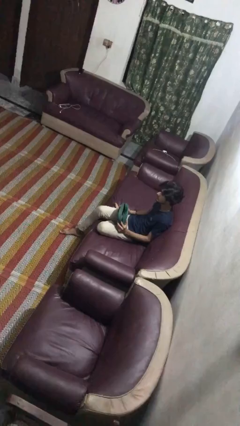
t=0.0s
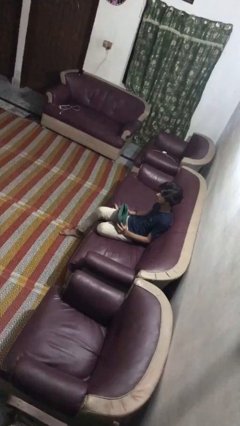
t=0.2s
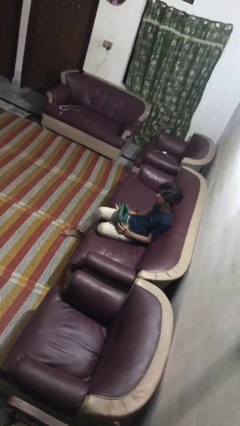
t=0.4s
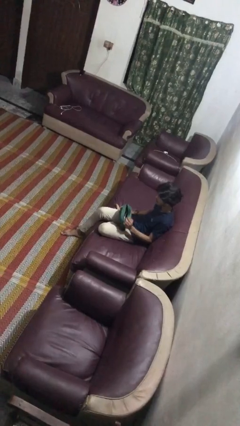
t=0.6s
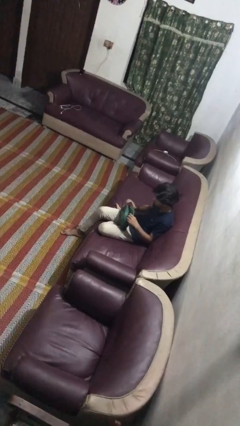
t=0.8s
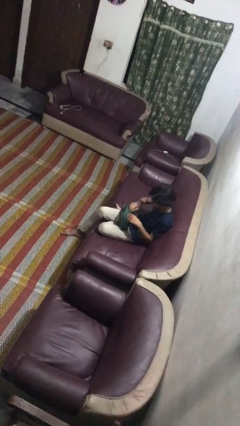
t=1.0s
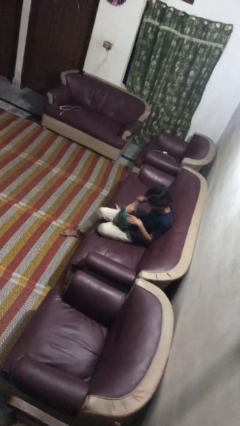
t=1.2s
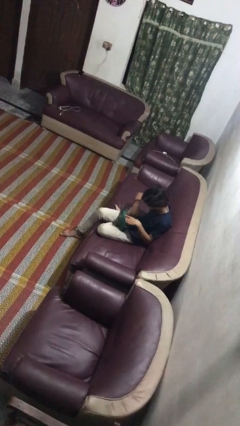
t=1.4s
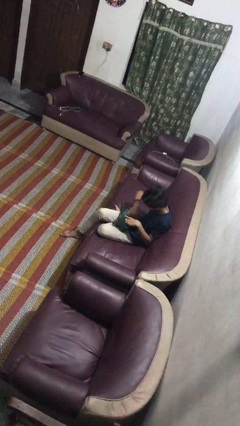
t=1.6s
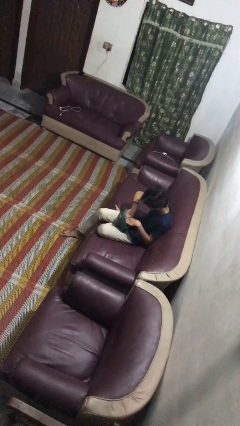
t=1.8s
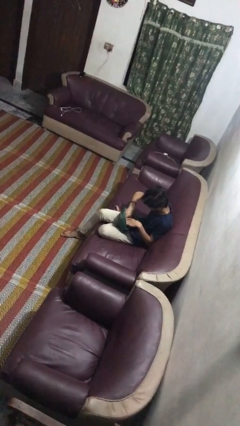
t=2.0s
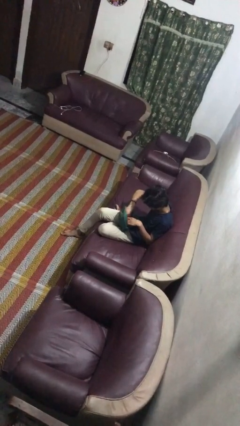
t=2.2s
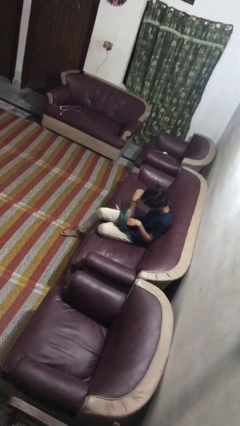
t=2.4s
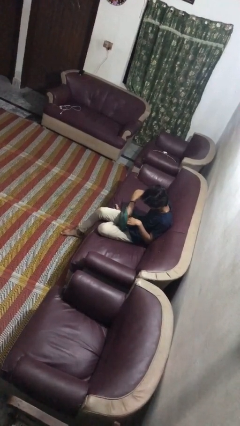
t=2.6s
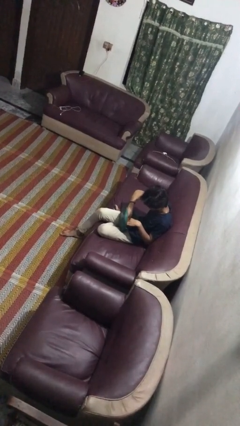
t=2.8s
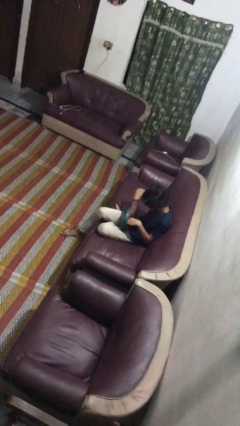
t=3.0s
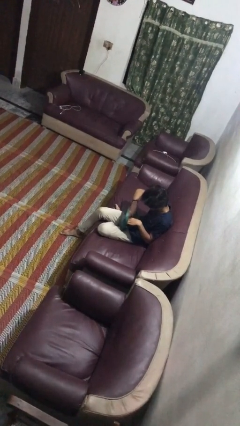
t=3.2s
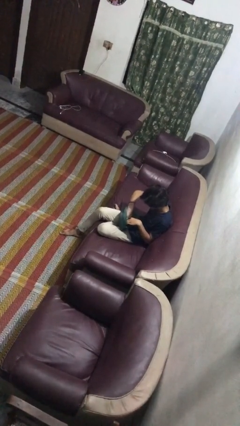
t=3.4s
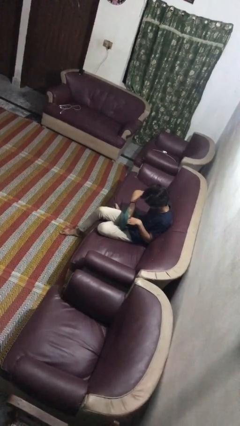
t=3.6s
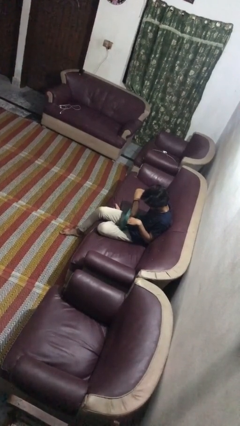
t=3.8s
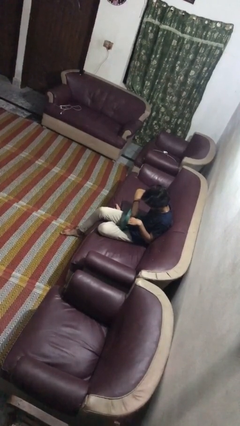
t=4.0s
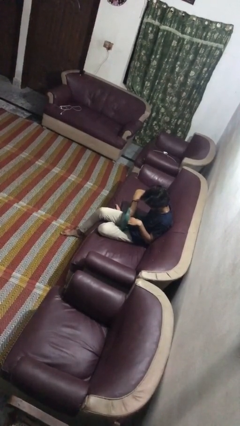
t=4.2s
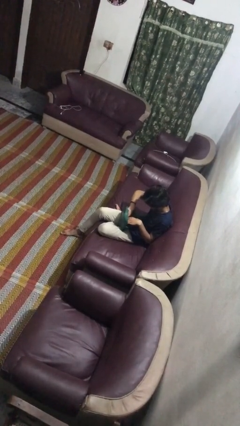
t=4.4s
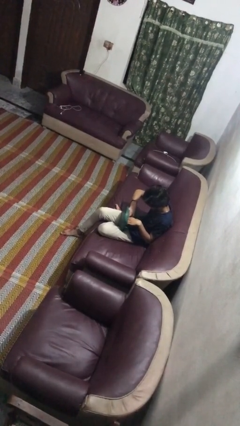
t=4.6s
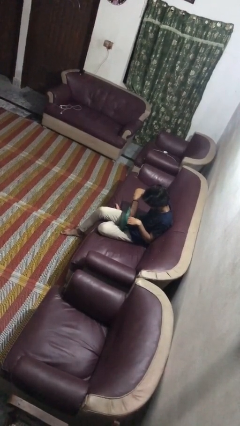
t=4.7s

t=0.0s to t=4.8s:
person searches in purse

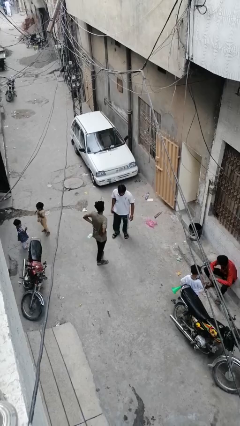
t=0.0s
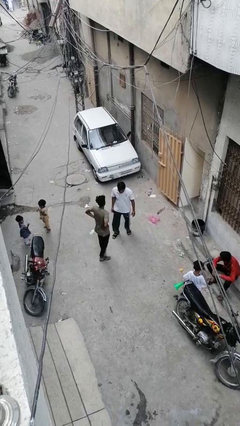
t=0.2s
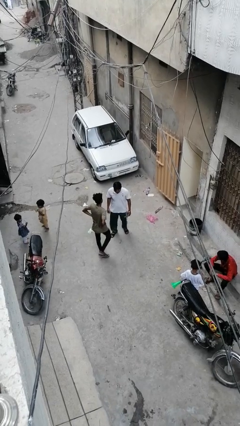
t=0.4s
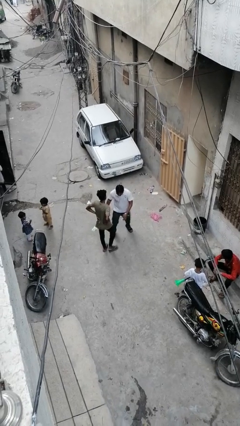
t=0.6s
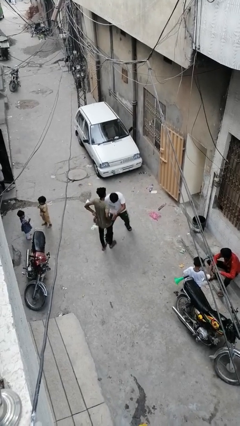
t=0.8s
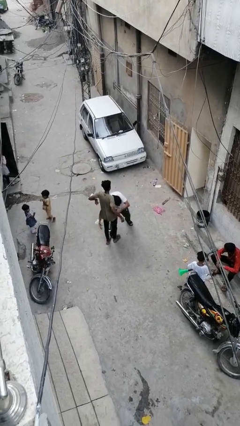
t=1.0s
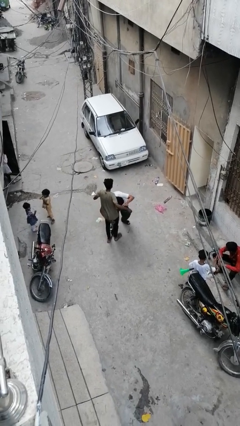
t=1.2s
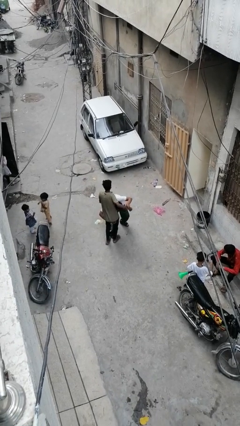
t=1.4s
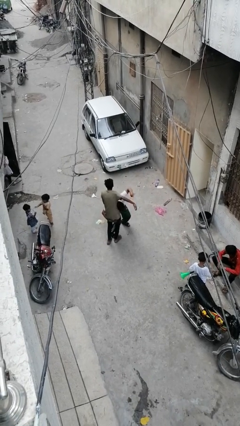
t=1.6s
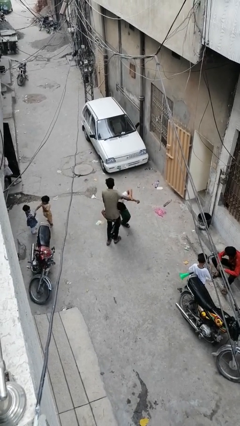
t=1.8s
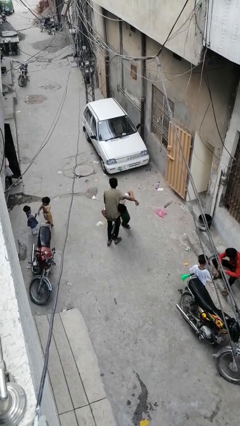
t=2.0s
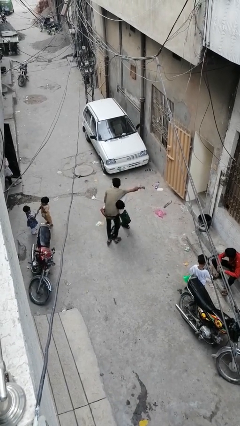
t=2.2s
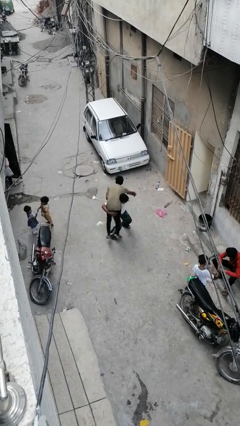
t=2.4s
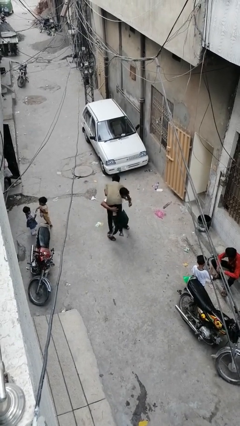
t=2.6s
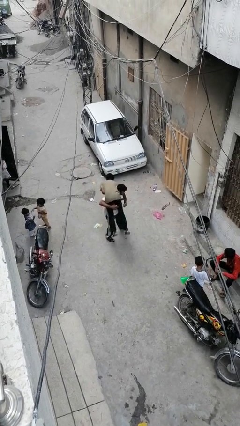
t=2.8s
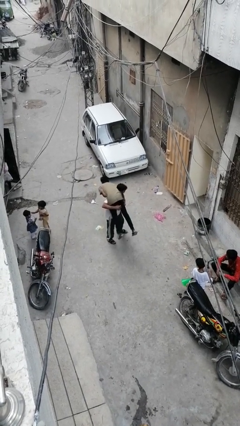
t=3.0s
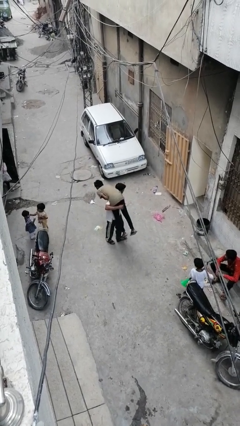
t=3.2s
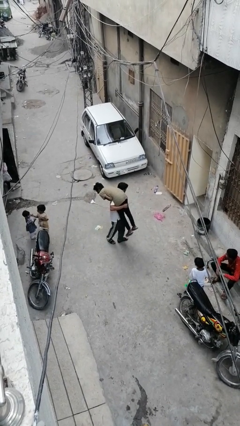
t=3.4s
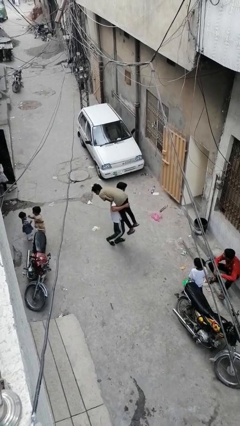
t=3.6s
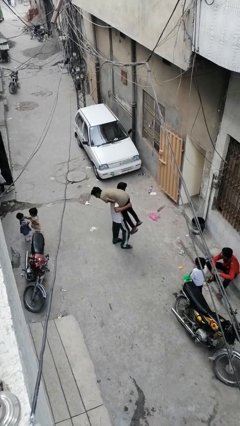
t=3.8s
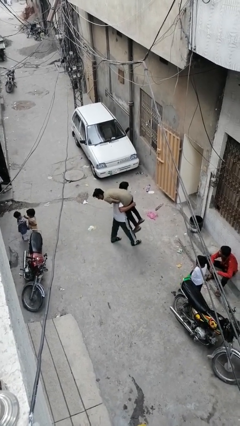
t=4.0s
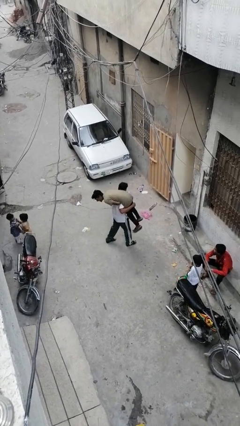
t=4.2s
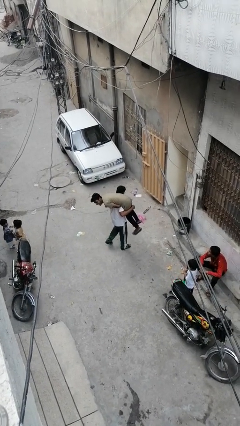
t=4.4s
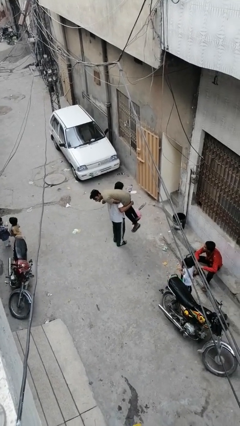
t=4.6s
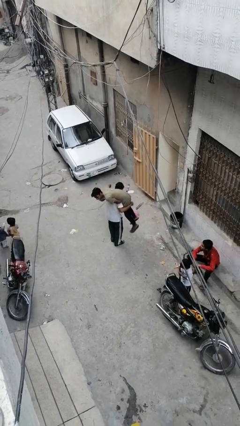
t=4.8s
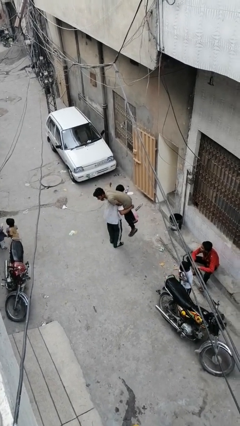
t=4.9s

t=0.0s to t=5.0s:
person carries person over shoulder

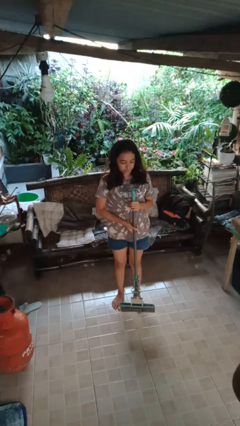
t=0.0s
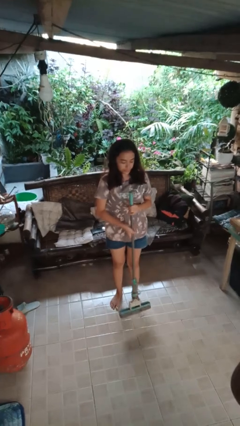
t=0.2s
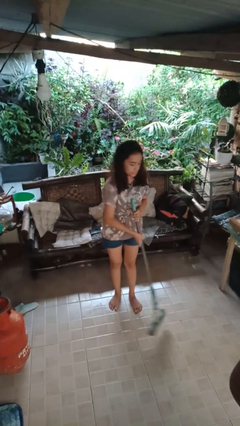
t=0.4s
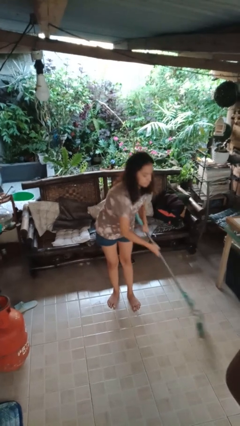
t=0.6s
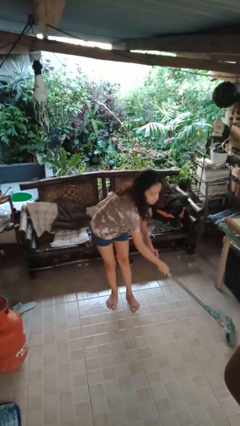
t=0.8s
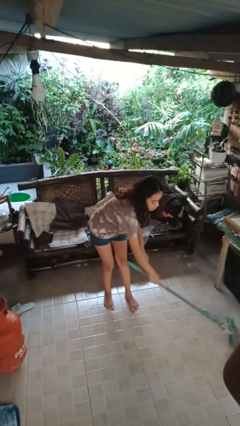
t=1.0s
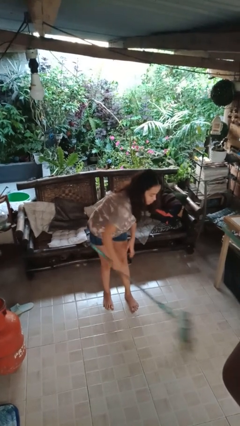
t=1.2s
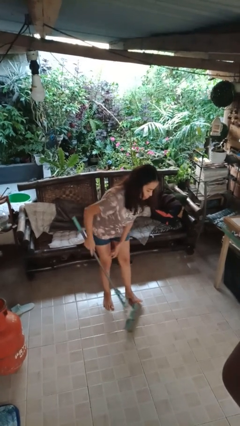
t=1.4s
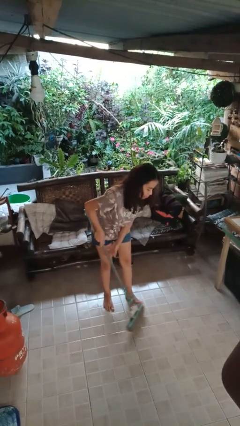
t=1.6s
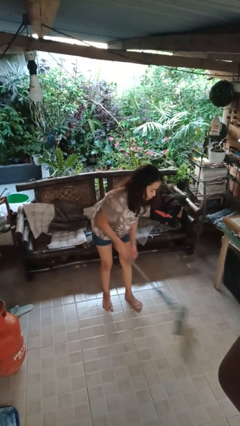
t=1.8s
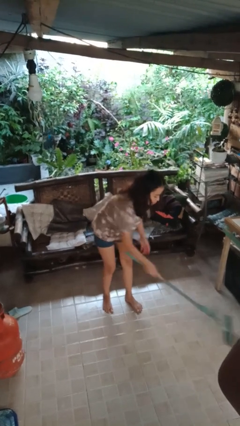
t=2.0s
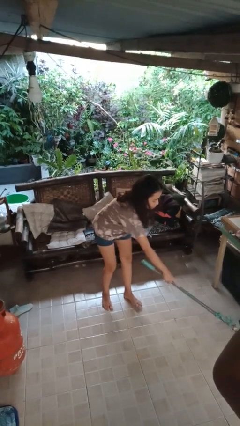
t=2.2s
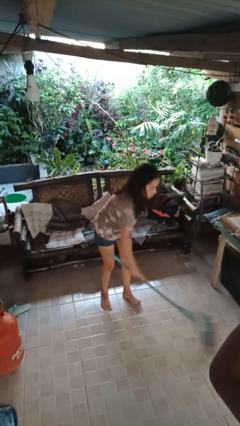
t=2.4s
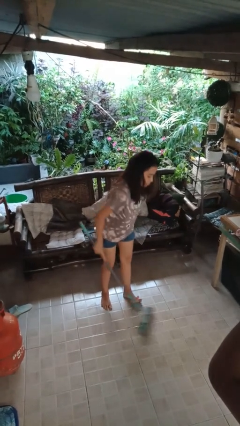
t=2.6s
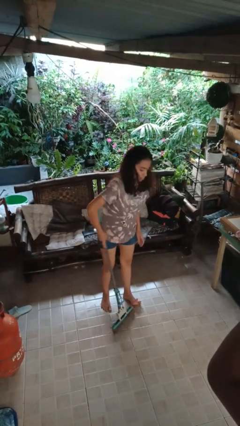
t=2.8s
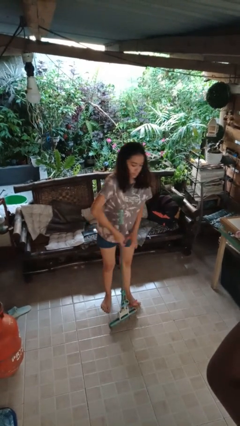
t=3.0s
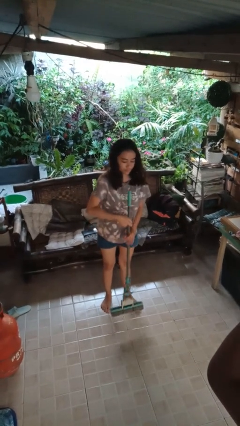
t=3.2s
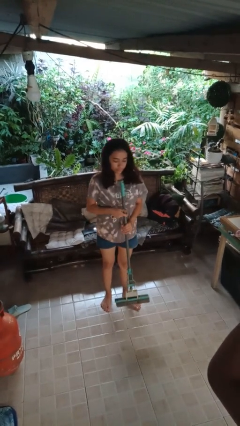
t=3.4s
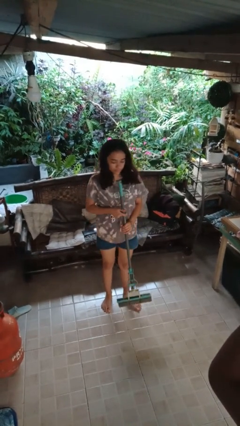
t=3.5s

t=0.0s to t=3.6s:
person mops

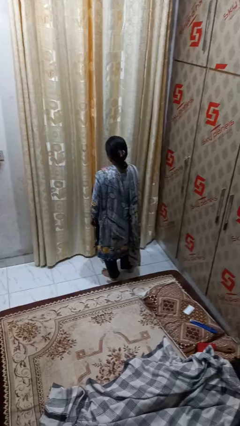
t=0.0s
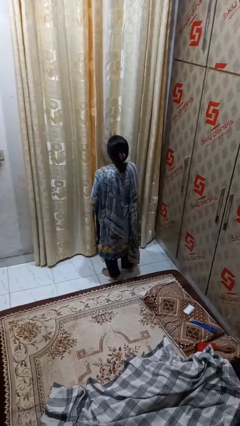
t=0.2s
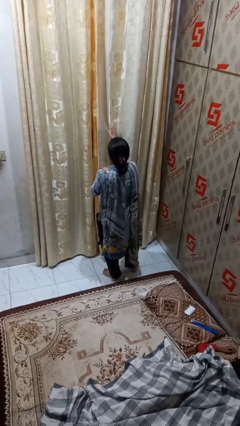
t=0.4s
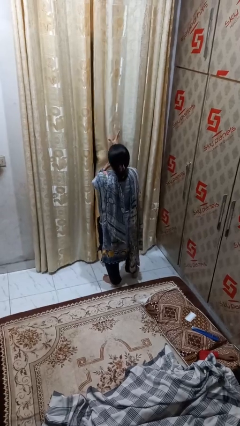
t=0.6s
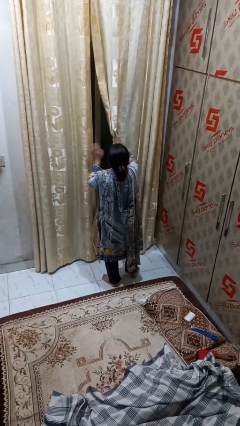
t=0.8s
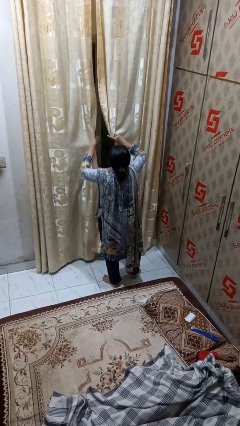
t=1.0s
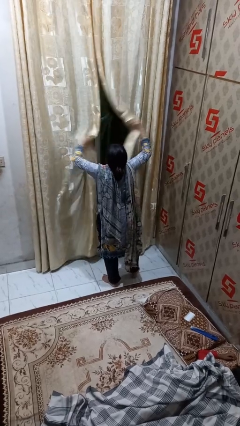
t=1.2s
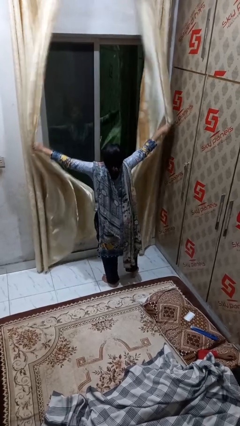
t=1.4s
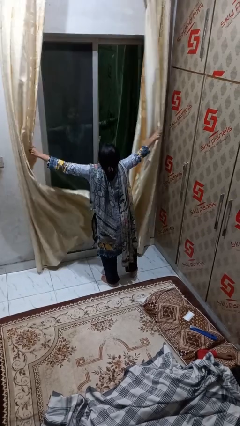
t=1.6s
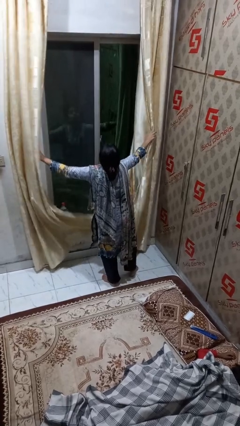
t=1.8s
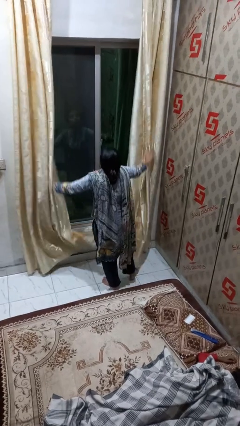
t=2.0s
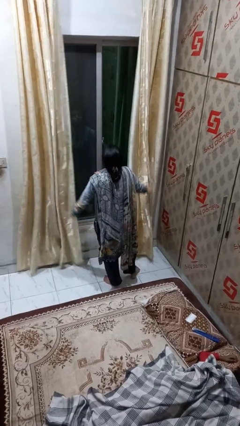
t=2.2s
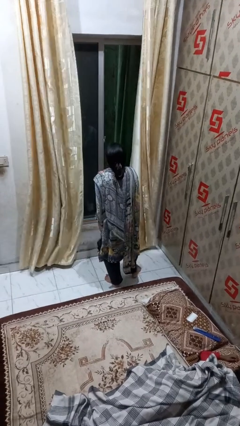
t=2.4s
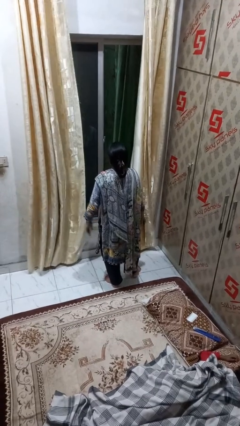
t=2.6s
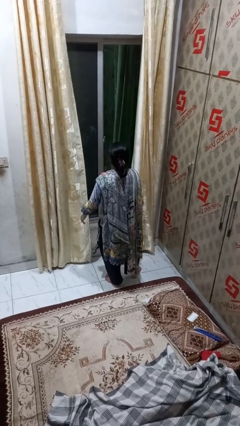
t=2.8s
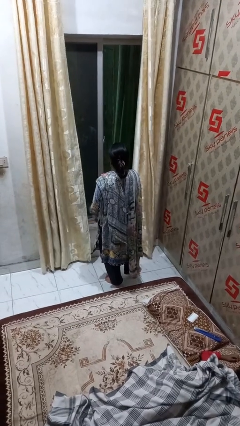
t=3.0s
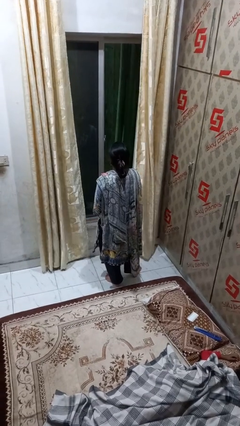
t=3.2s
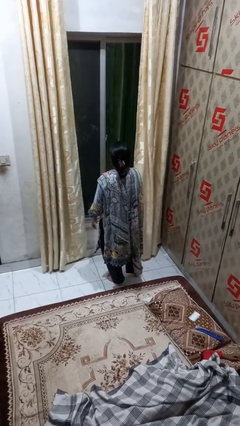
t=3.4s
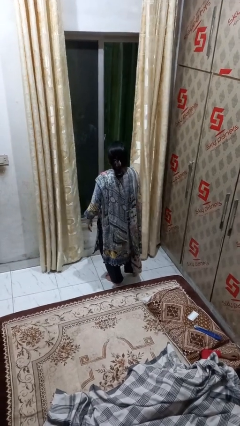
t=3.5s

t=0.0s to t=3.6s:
person opens curtains

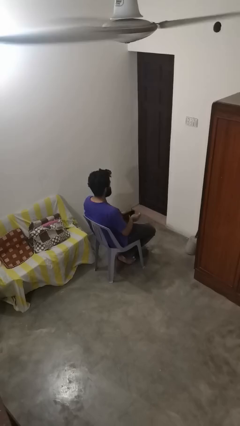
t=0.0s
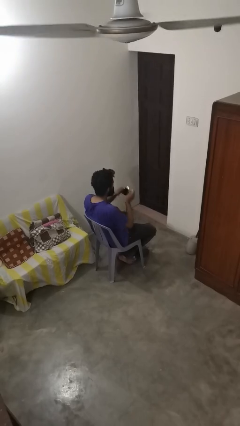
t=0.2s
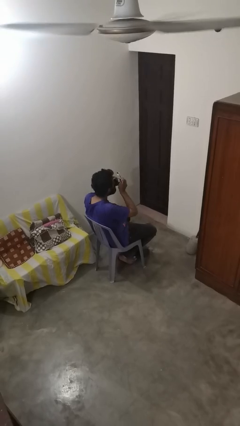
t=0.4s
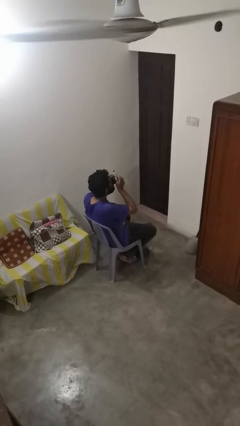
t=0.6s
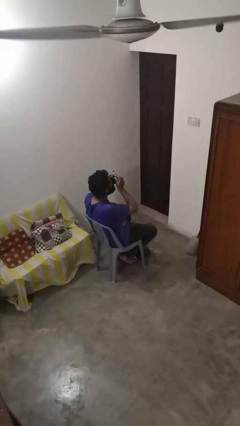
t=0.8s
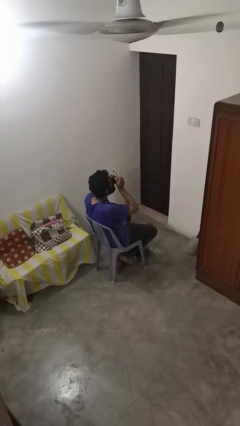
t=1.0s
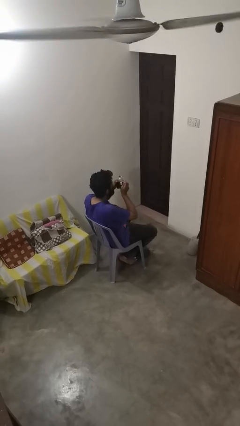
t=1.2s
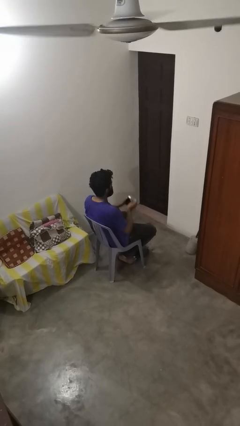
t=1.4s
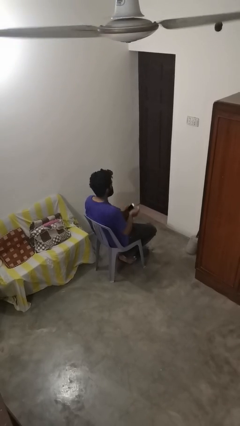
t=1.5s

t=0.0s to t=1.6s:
person drinks from mug
